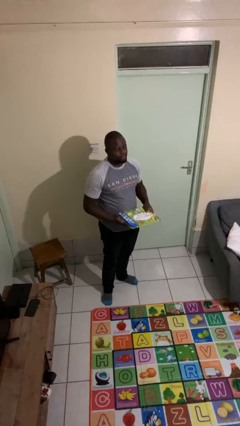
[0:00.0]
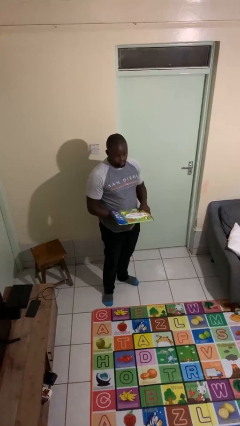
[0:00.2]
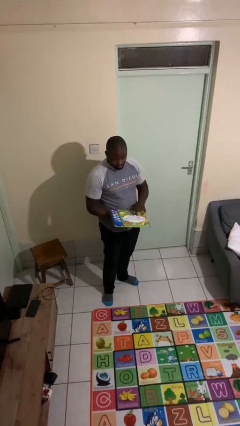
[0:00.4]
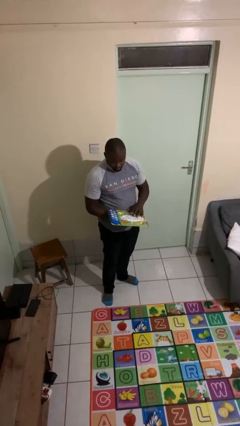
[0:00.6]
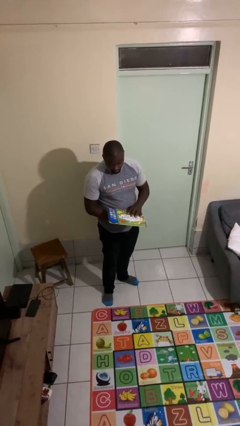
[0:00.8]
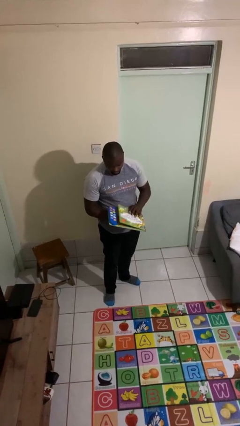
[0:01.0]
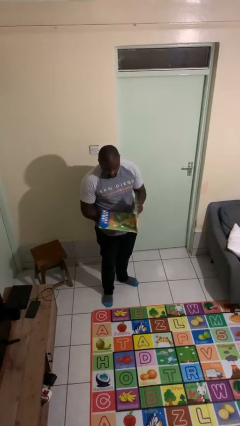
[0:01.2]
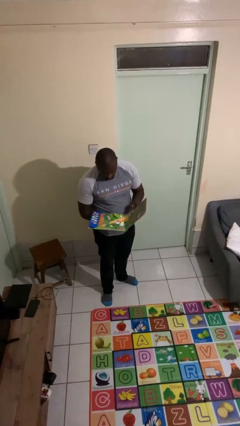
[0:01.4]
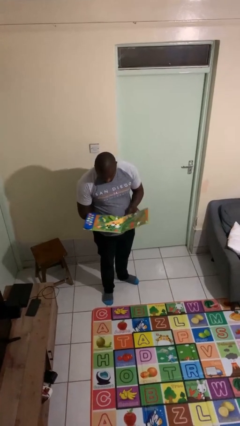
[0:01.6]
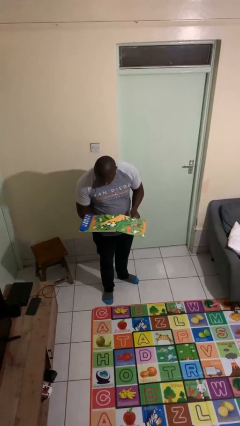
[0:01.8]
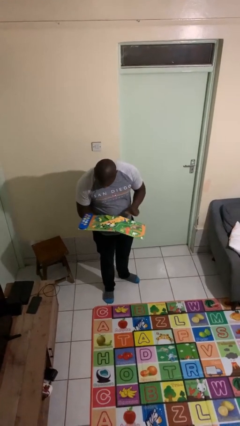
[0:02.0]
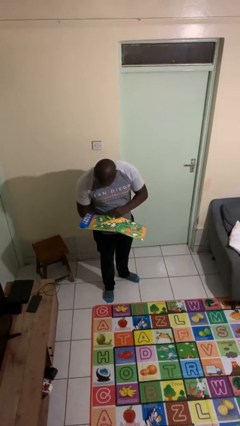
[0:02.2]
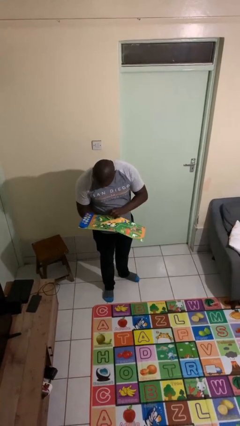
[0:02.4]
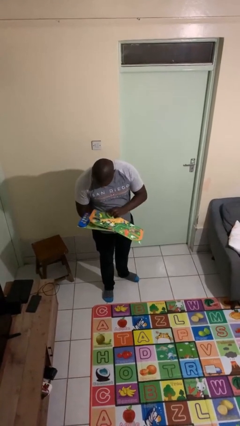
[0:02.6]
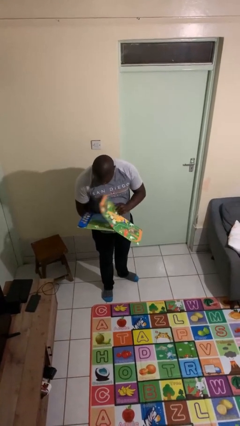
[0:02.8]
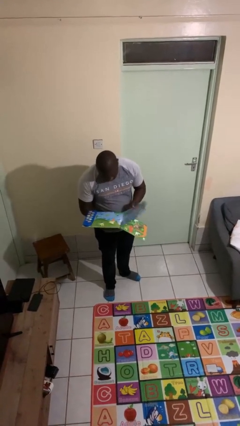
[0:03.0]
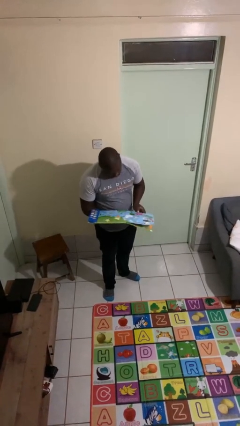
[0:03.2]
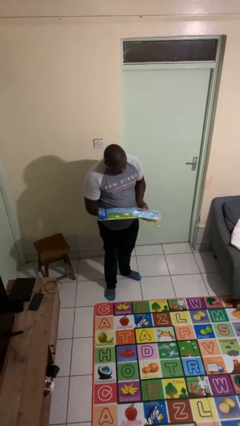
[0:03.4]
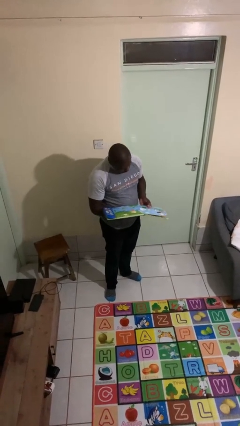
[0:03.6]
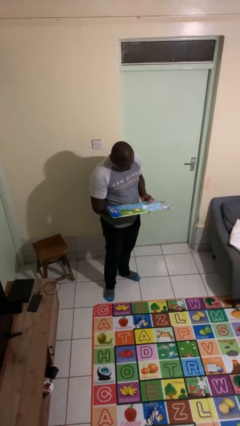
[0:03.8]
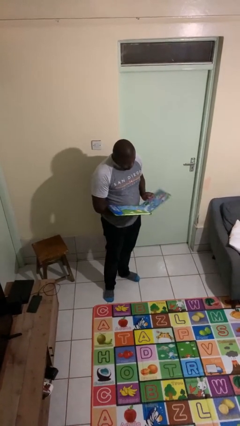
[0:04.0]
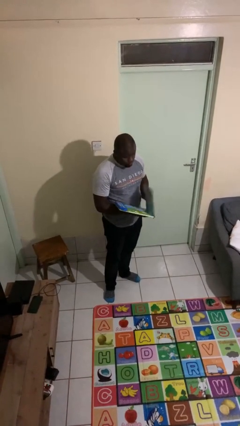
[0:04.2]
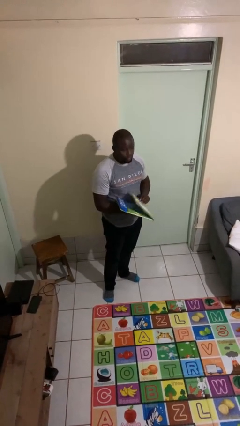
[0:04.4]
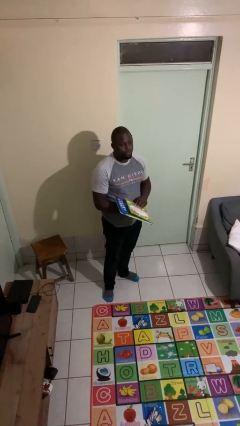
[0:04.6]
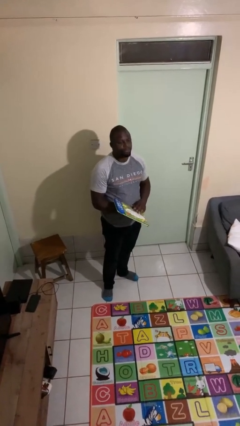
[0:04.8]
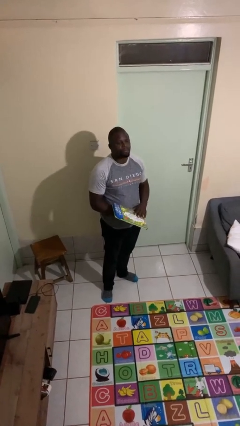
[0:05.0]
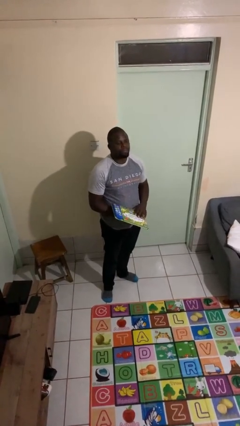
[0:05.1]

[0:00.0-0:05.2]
person reads book

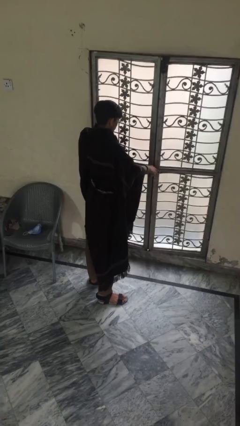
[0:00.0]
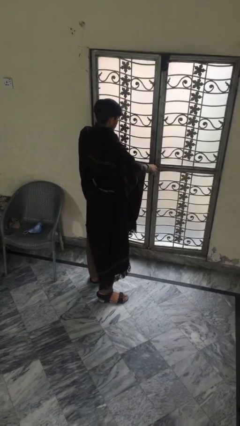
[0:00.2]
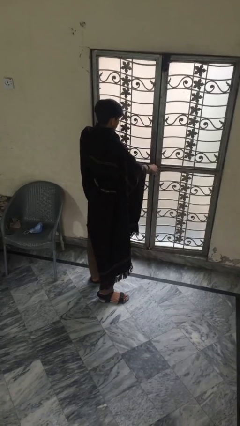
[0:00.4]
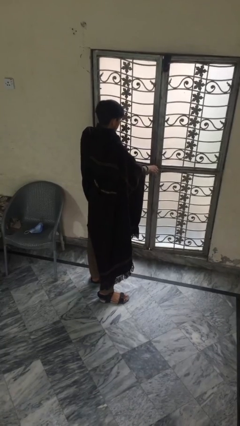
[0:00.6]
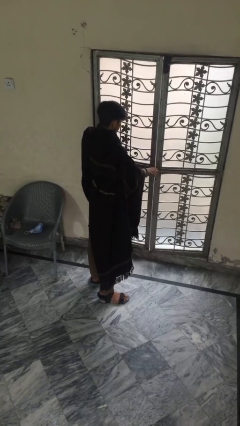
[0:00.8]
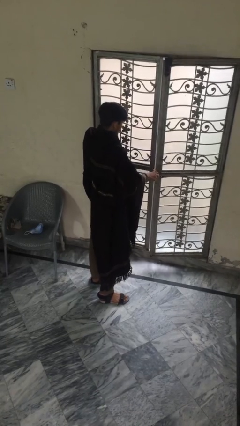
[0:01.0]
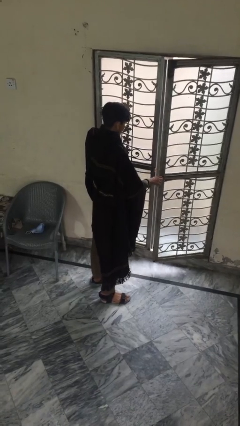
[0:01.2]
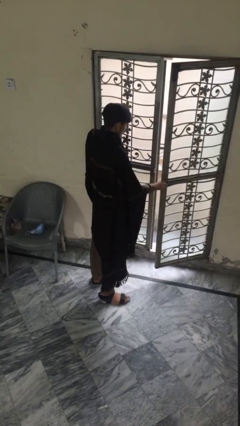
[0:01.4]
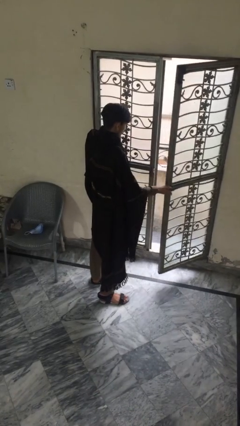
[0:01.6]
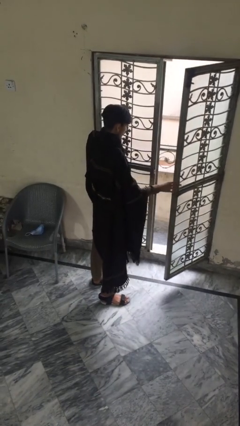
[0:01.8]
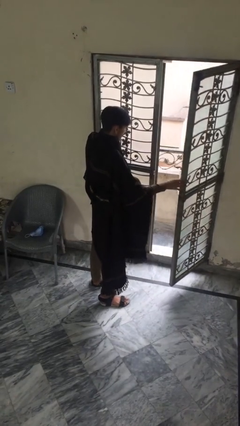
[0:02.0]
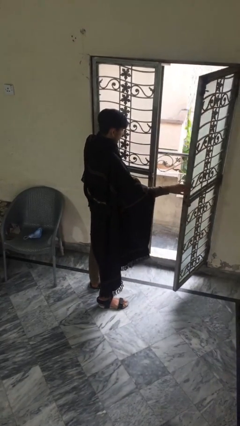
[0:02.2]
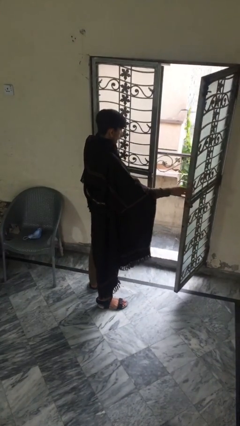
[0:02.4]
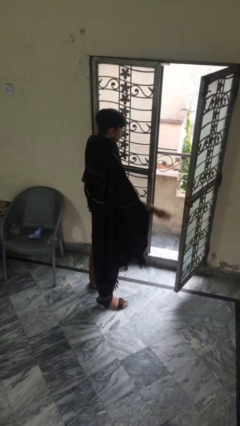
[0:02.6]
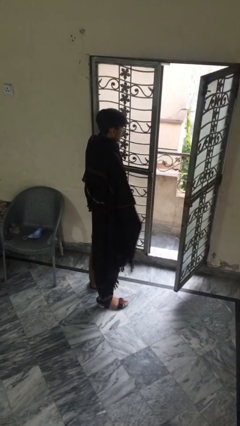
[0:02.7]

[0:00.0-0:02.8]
person opens facility door

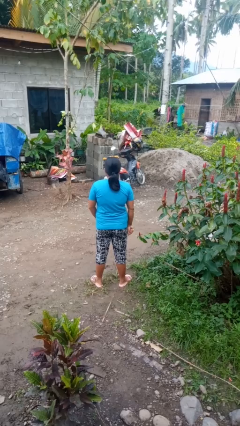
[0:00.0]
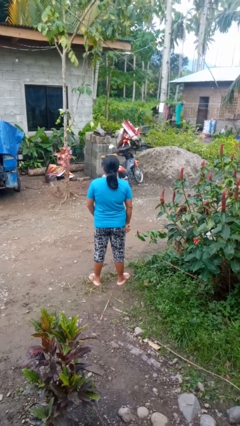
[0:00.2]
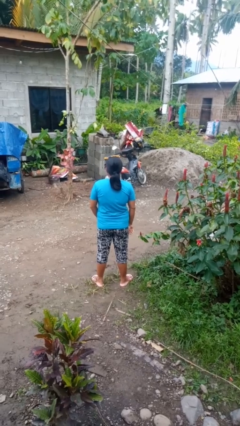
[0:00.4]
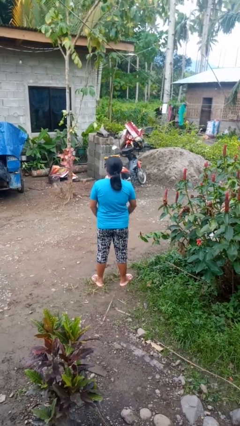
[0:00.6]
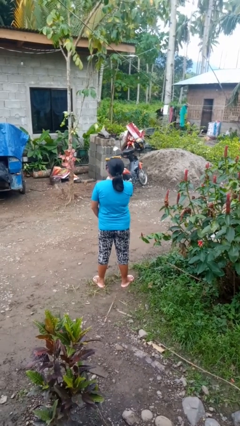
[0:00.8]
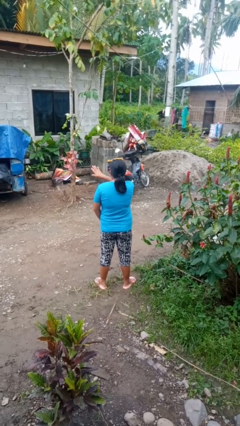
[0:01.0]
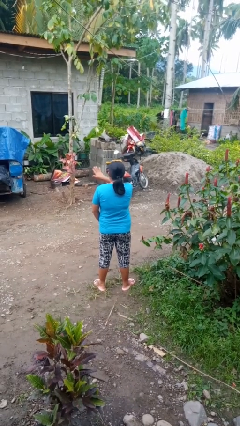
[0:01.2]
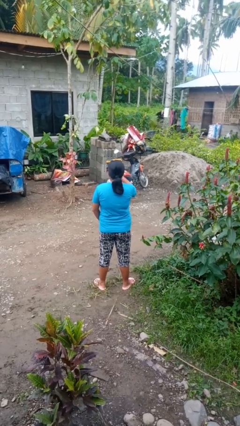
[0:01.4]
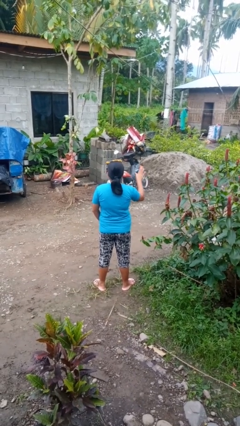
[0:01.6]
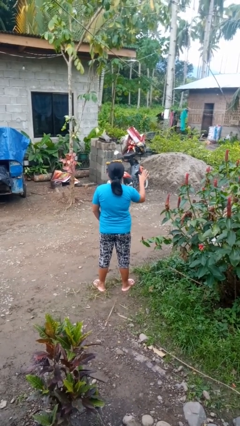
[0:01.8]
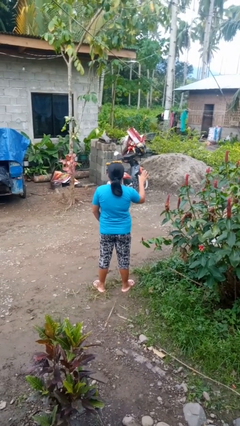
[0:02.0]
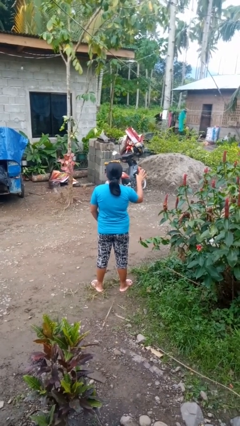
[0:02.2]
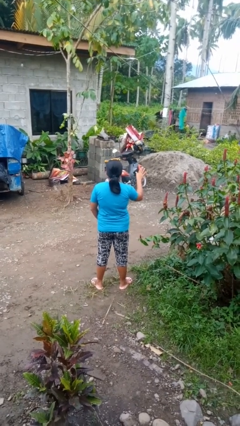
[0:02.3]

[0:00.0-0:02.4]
person gestures swipe right

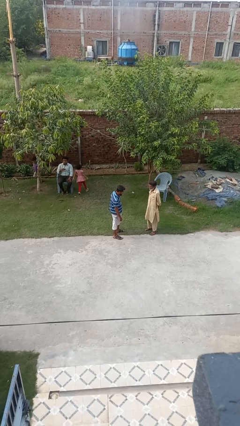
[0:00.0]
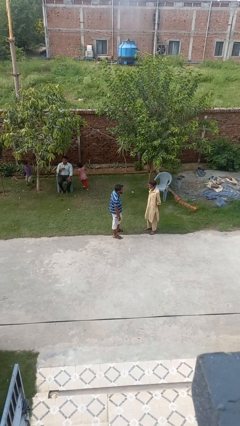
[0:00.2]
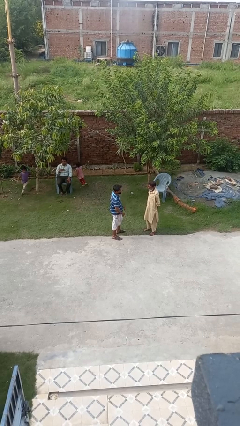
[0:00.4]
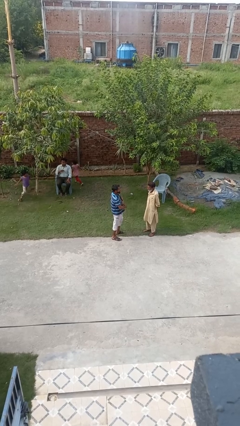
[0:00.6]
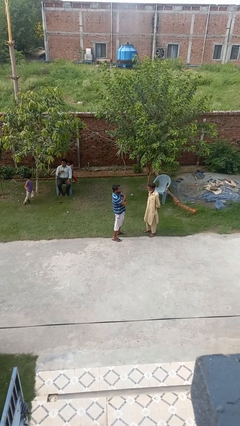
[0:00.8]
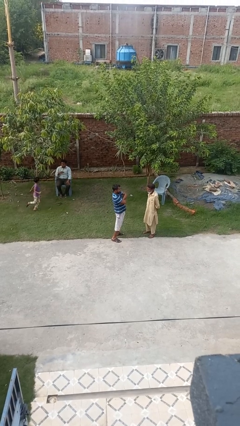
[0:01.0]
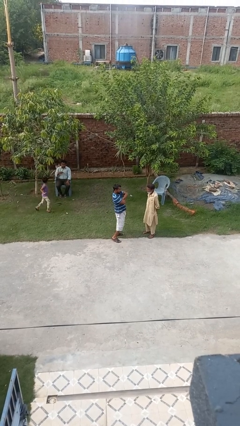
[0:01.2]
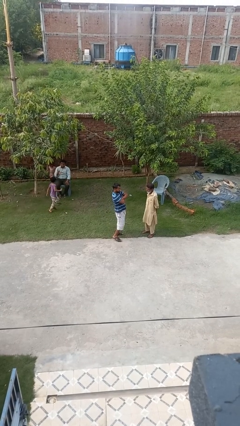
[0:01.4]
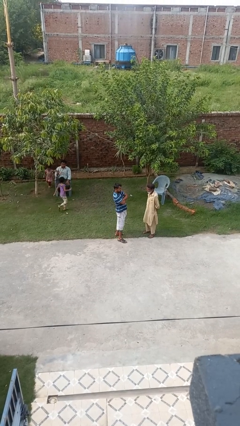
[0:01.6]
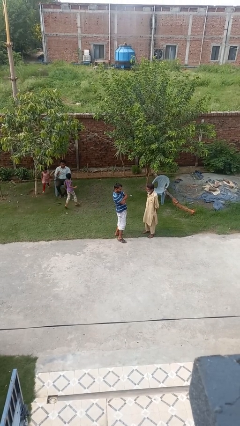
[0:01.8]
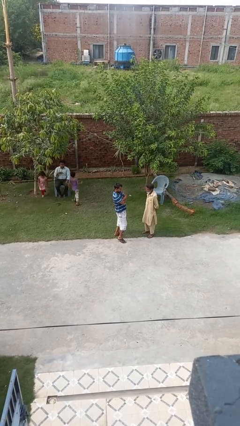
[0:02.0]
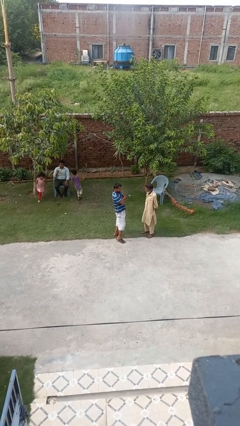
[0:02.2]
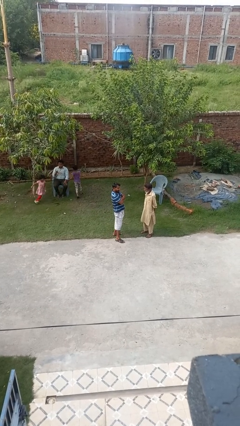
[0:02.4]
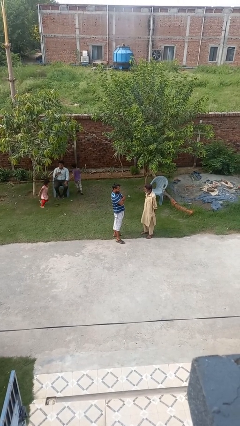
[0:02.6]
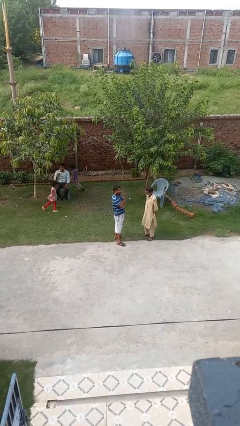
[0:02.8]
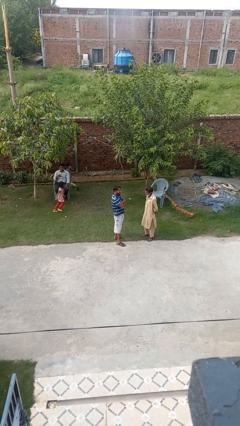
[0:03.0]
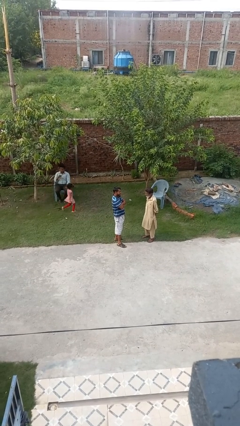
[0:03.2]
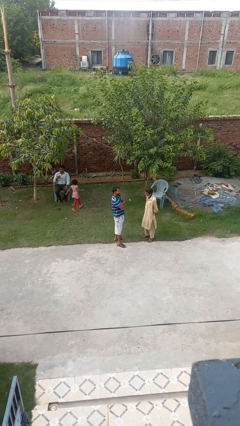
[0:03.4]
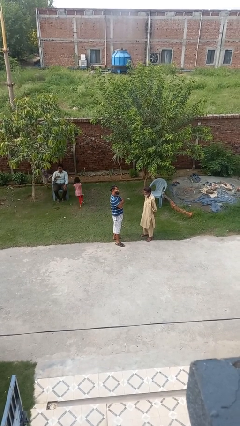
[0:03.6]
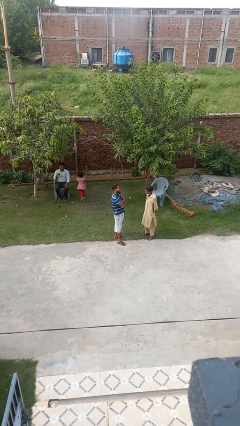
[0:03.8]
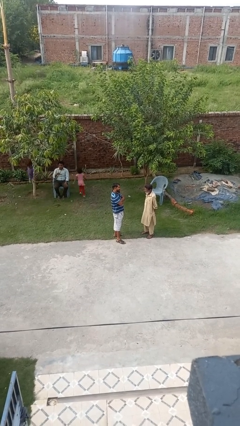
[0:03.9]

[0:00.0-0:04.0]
person talks to person

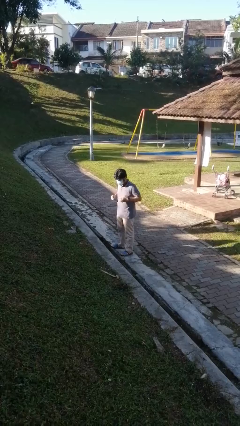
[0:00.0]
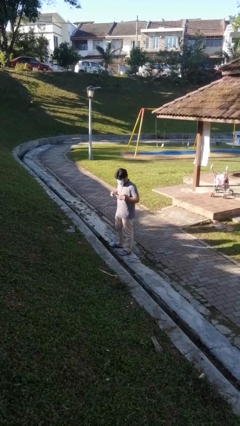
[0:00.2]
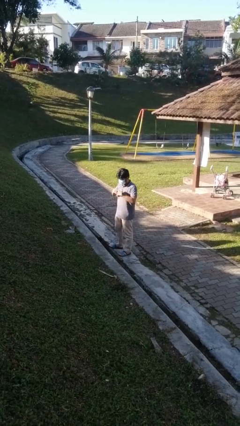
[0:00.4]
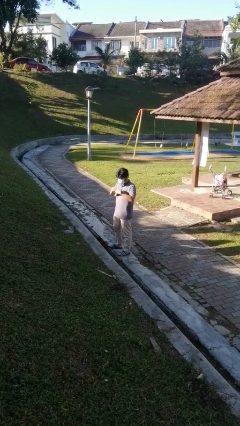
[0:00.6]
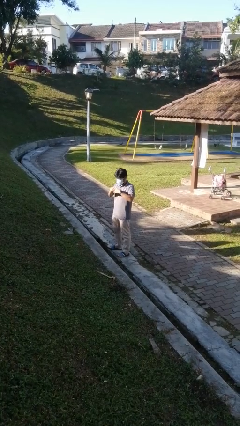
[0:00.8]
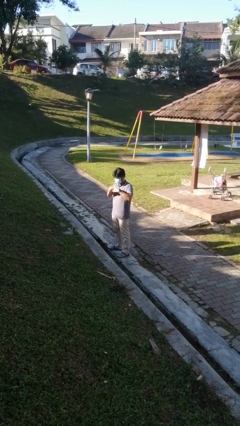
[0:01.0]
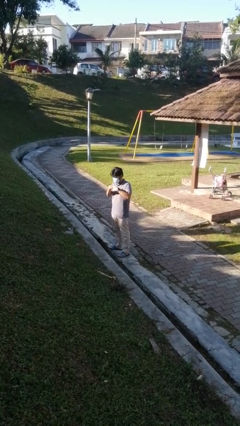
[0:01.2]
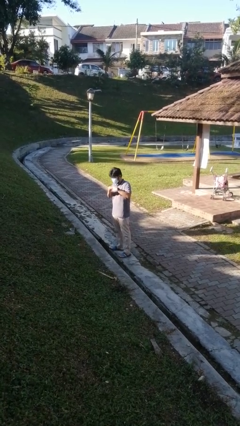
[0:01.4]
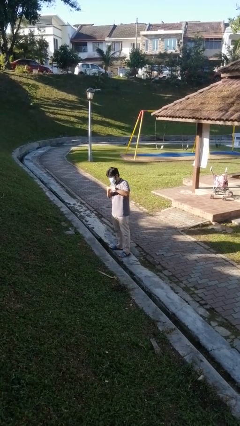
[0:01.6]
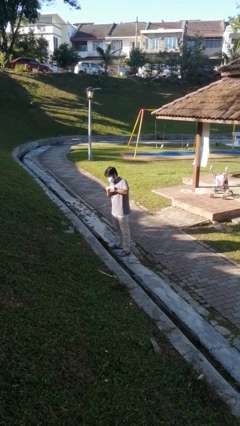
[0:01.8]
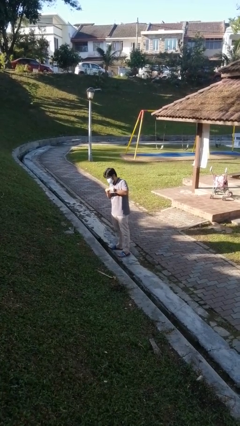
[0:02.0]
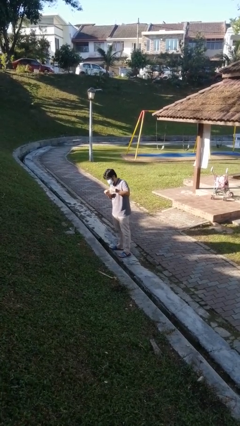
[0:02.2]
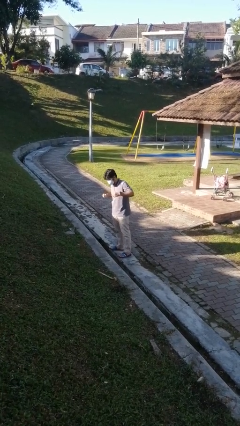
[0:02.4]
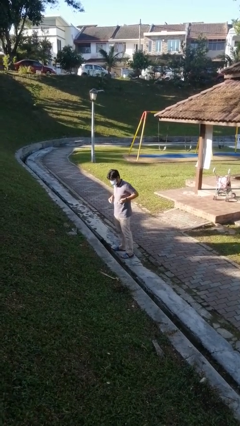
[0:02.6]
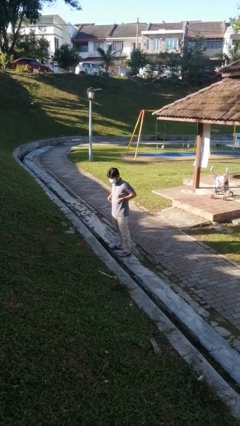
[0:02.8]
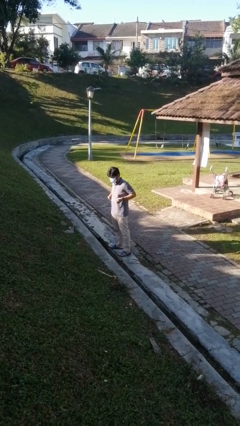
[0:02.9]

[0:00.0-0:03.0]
person takes off ring
